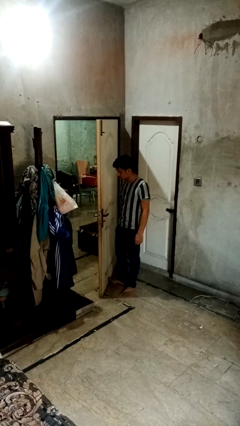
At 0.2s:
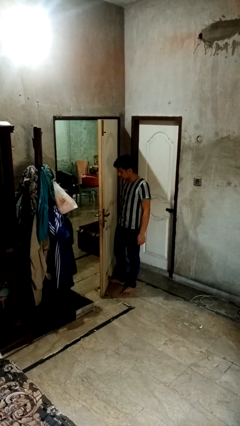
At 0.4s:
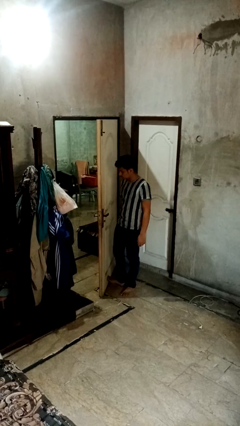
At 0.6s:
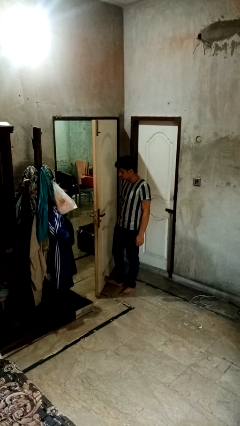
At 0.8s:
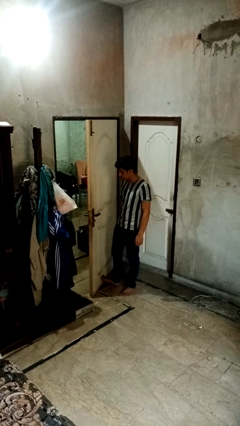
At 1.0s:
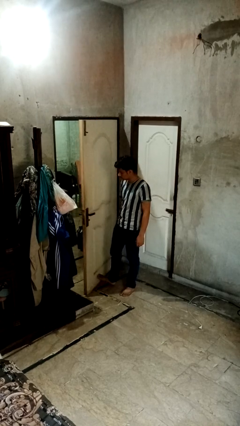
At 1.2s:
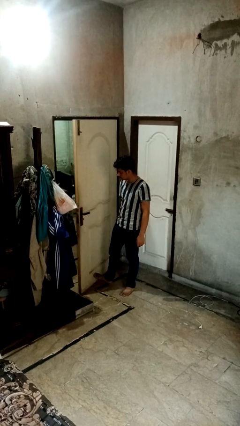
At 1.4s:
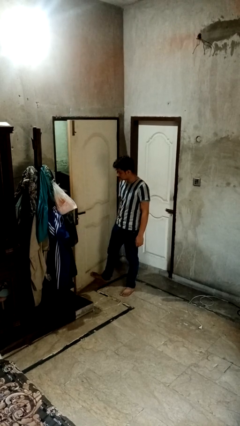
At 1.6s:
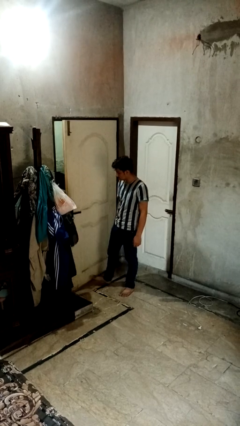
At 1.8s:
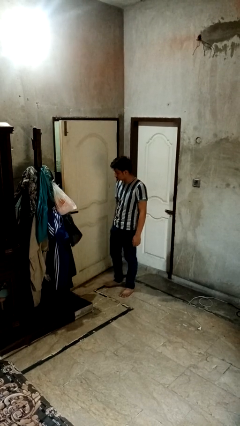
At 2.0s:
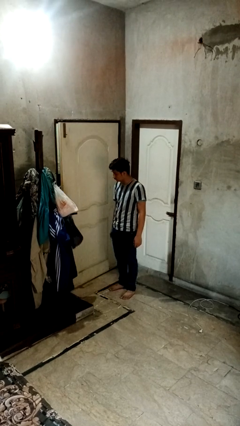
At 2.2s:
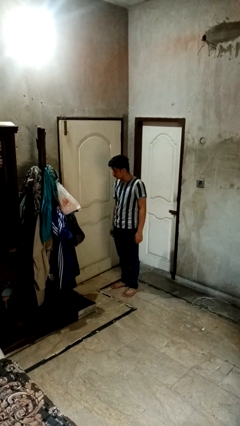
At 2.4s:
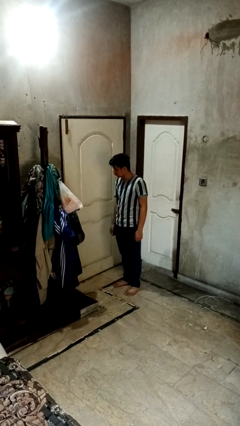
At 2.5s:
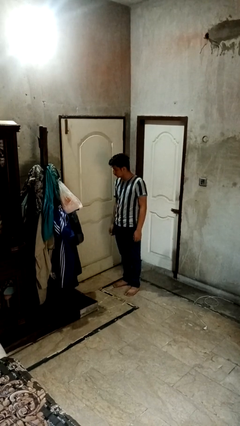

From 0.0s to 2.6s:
person closes door with foot

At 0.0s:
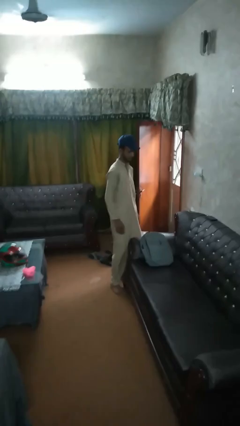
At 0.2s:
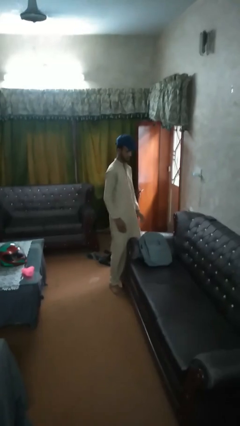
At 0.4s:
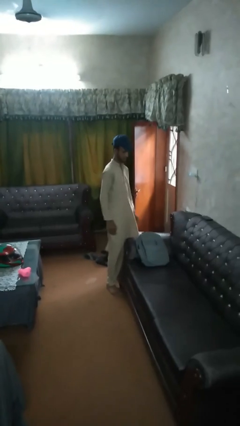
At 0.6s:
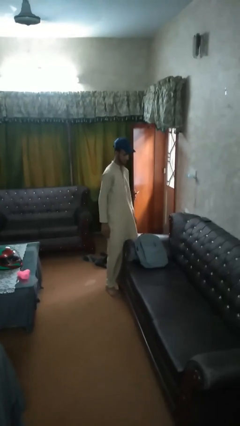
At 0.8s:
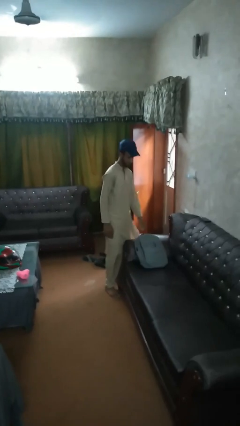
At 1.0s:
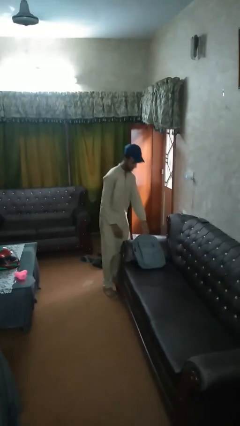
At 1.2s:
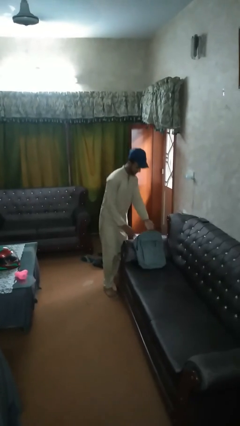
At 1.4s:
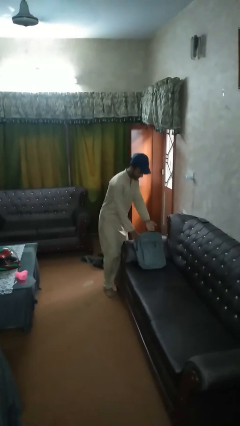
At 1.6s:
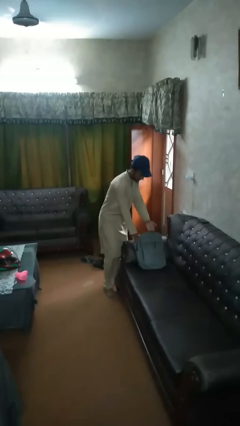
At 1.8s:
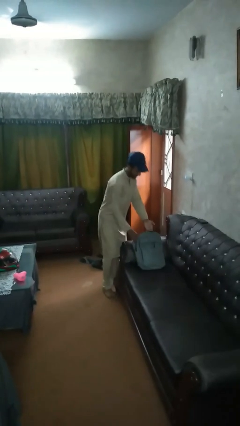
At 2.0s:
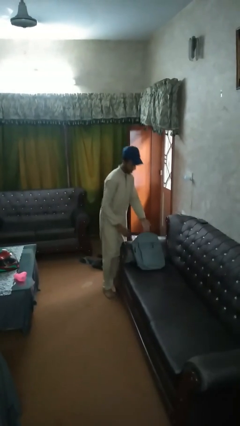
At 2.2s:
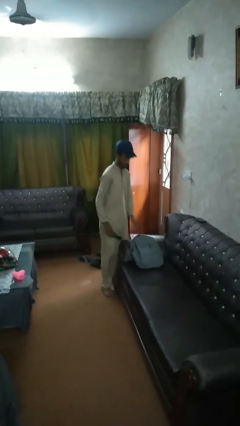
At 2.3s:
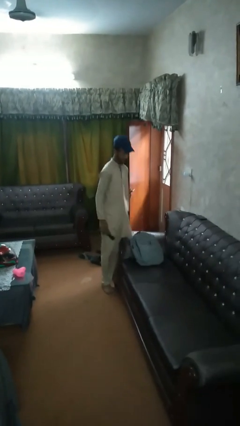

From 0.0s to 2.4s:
person takes object from bag

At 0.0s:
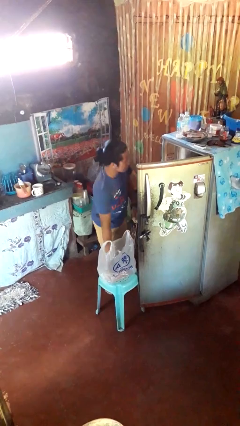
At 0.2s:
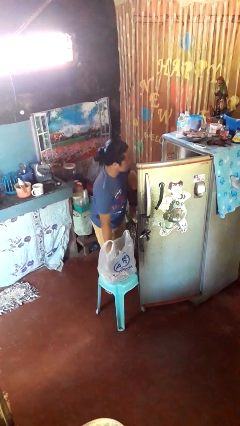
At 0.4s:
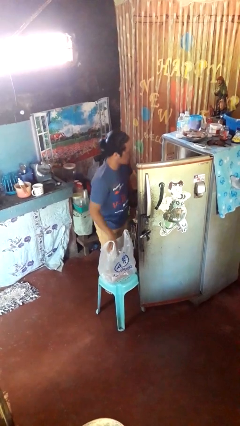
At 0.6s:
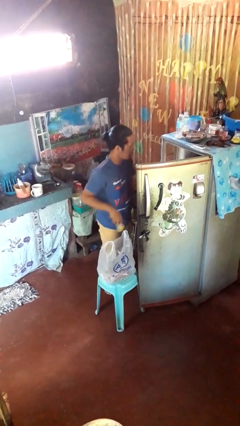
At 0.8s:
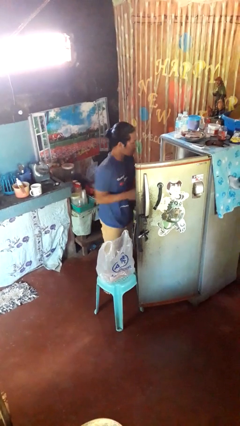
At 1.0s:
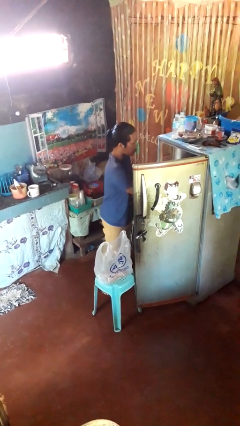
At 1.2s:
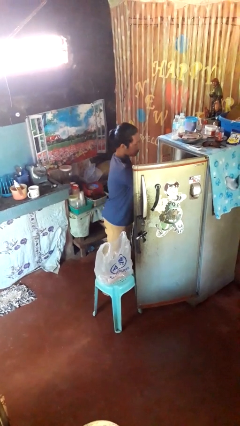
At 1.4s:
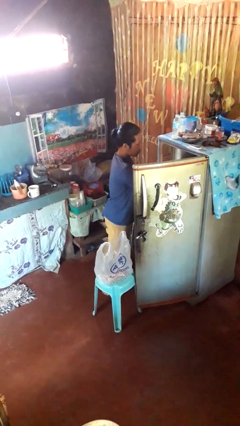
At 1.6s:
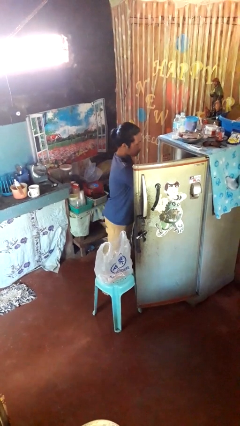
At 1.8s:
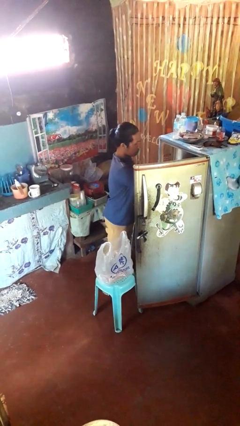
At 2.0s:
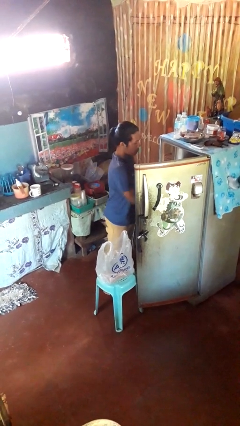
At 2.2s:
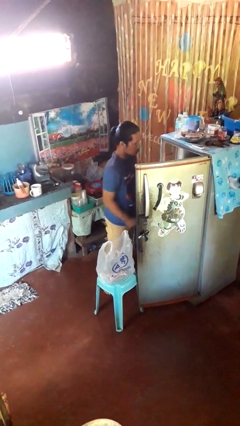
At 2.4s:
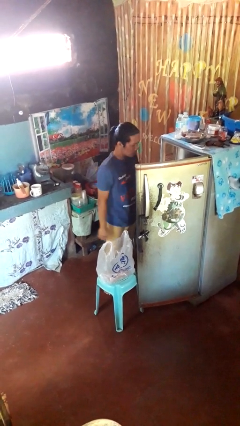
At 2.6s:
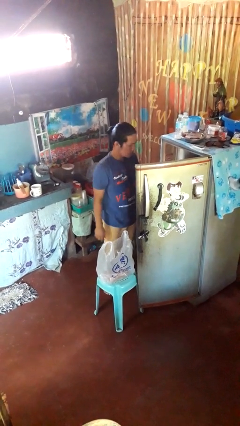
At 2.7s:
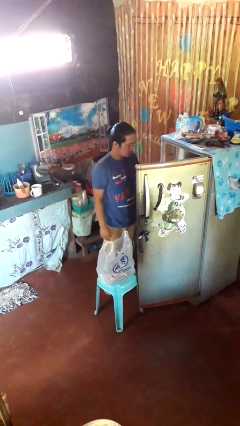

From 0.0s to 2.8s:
person loads groceries into refrigerator

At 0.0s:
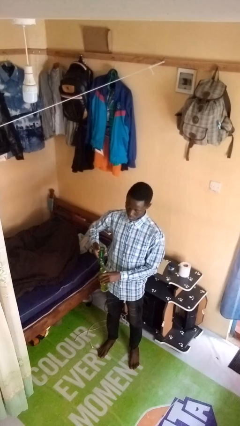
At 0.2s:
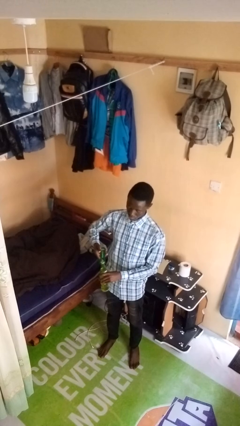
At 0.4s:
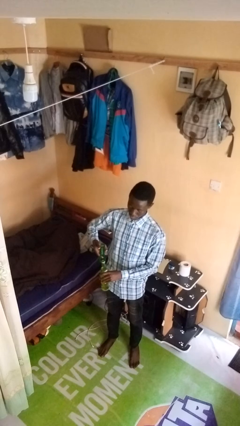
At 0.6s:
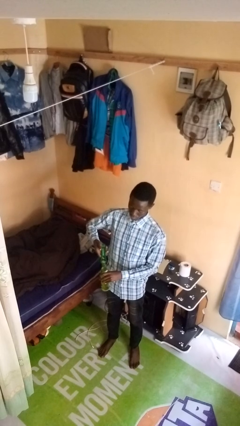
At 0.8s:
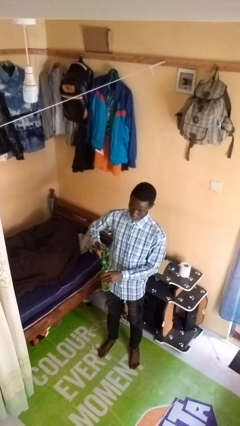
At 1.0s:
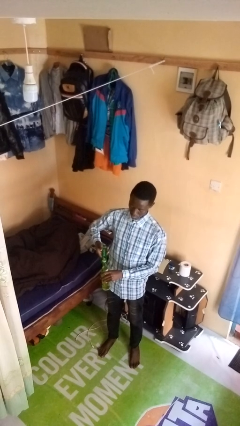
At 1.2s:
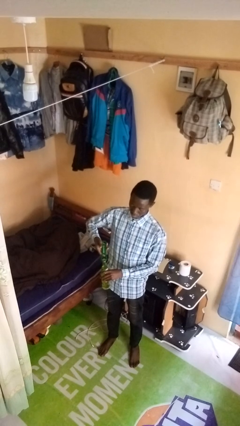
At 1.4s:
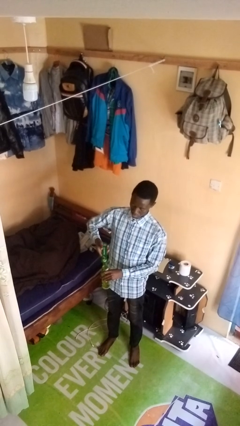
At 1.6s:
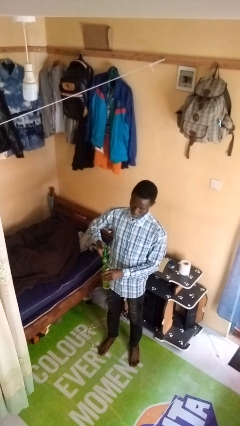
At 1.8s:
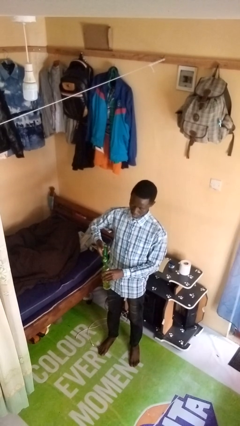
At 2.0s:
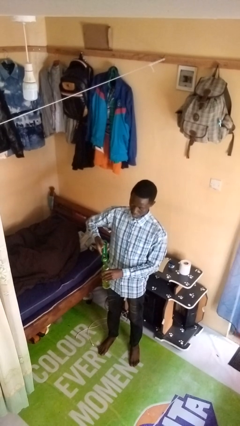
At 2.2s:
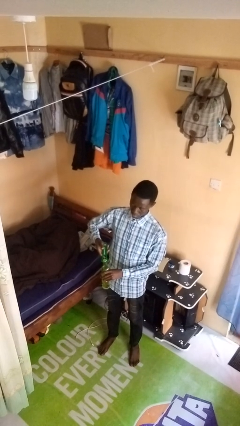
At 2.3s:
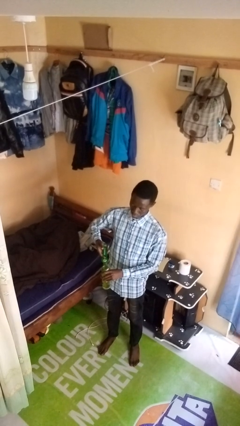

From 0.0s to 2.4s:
person opens can with can opener

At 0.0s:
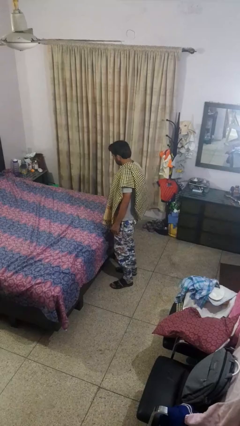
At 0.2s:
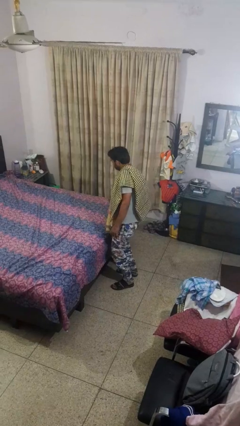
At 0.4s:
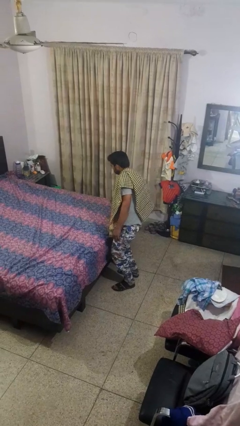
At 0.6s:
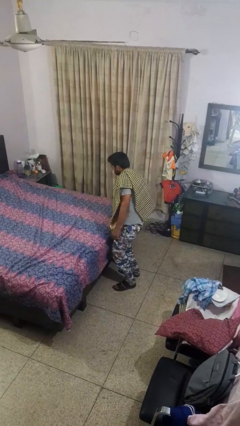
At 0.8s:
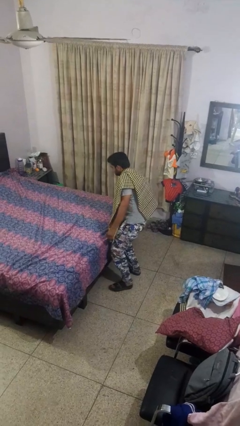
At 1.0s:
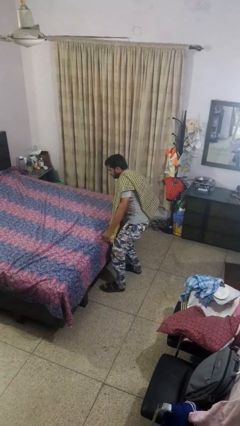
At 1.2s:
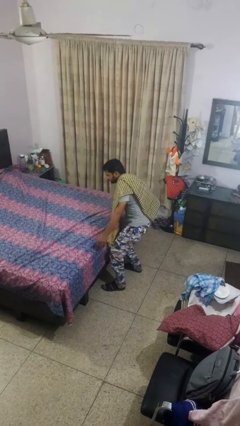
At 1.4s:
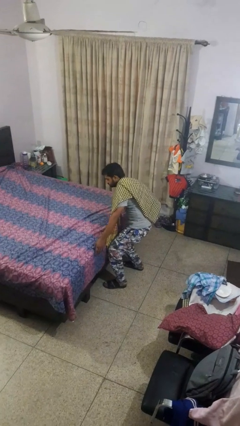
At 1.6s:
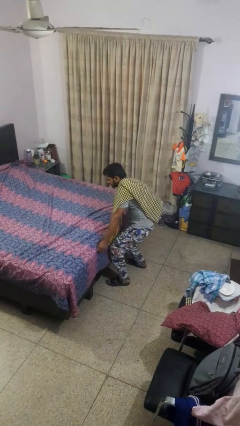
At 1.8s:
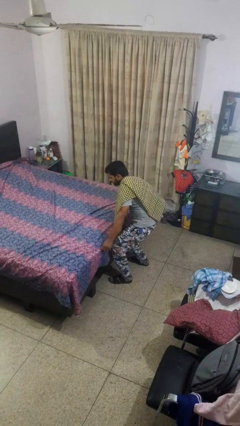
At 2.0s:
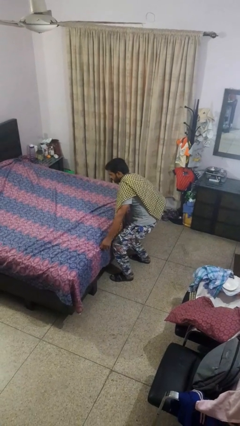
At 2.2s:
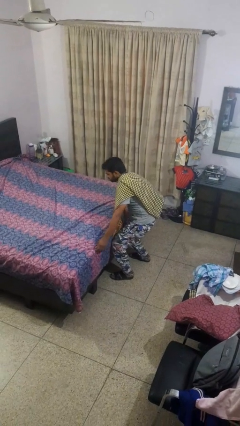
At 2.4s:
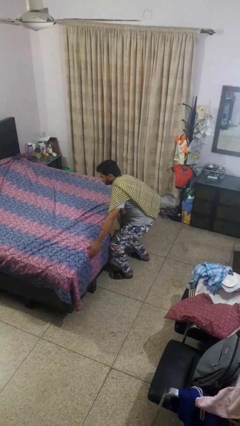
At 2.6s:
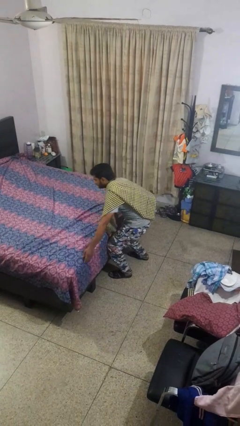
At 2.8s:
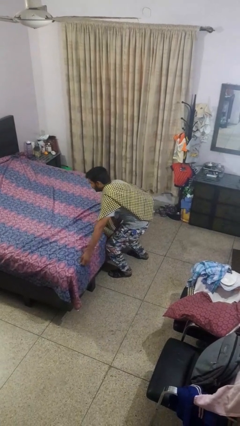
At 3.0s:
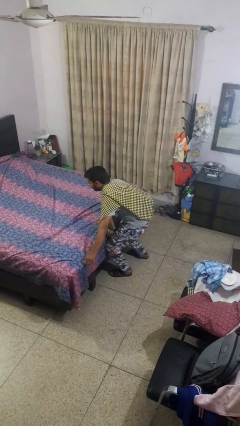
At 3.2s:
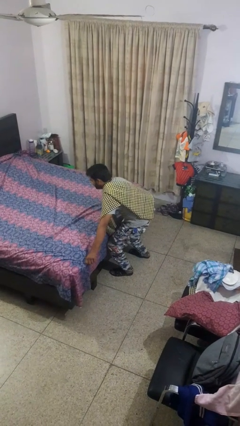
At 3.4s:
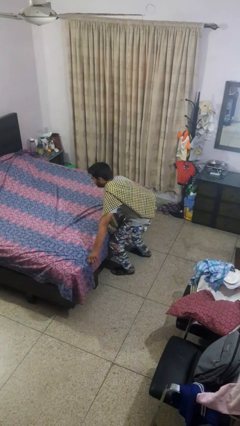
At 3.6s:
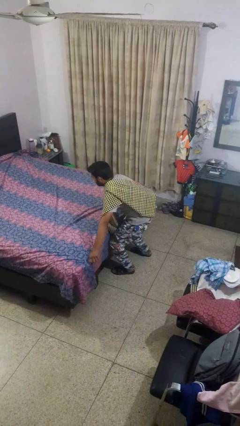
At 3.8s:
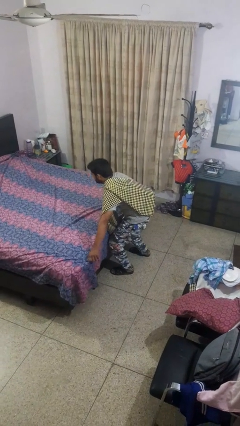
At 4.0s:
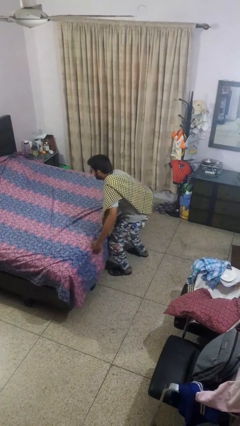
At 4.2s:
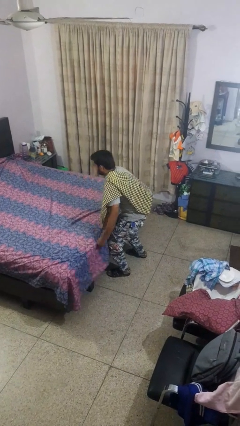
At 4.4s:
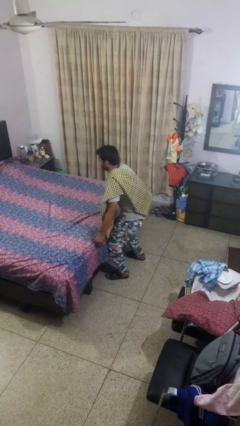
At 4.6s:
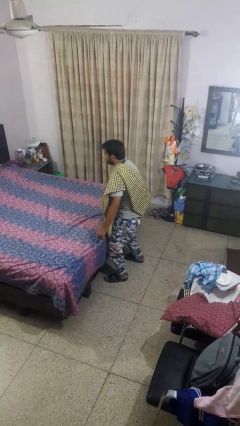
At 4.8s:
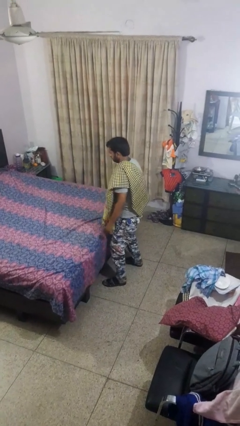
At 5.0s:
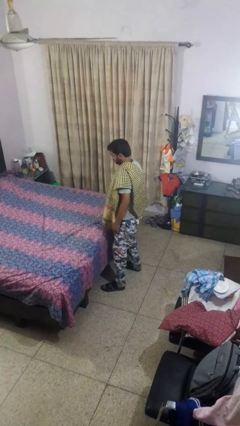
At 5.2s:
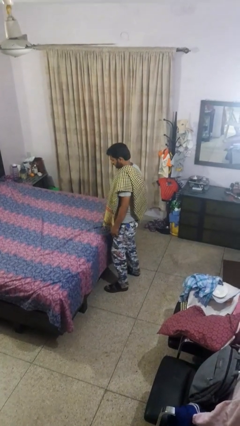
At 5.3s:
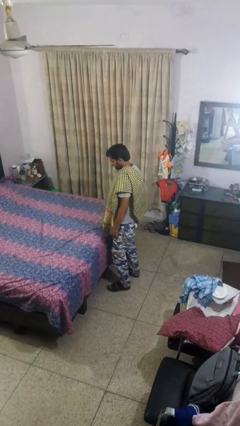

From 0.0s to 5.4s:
person makes bed

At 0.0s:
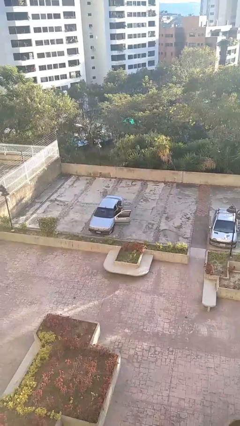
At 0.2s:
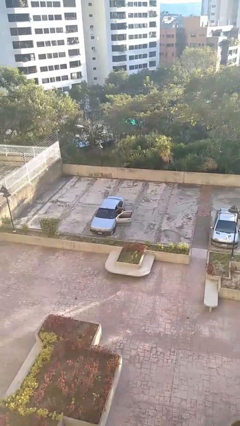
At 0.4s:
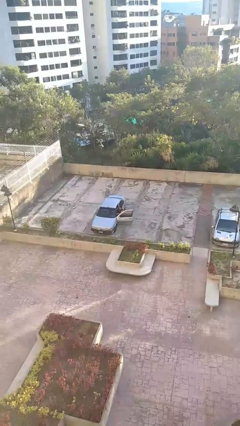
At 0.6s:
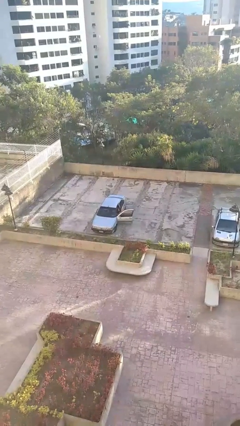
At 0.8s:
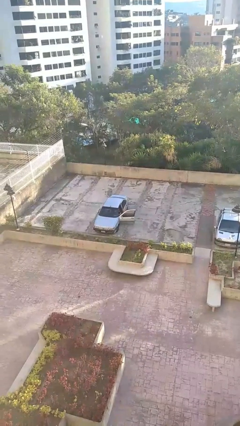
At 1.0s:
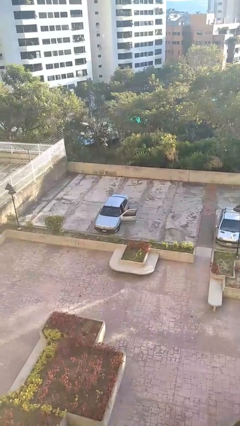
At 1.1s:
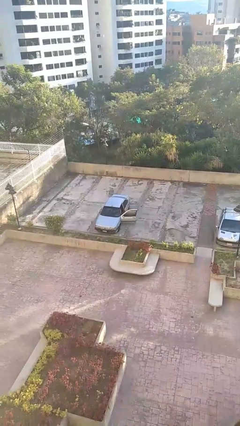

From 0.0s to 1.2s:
person enters car

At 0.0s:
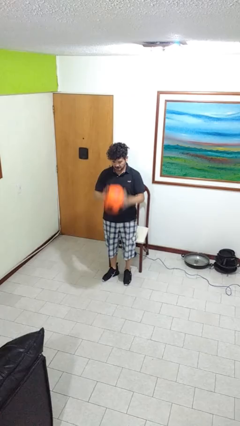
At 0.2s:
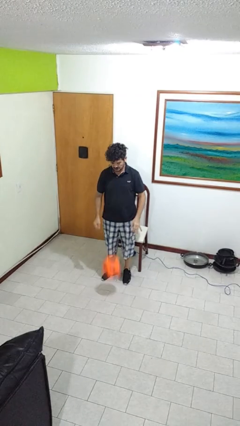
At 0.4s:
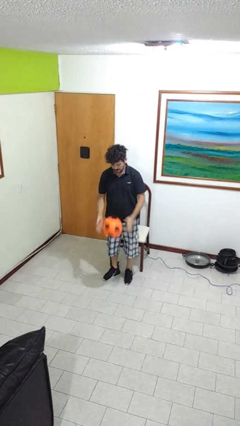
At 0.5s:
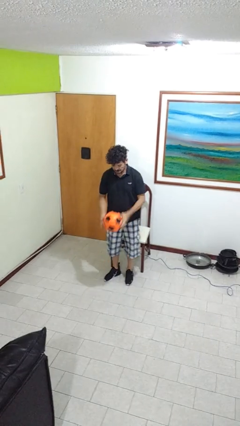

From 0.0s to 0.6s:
person bounces ball on floor
